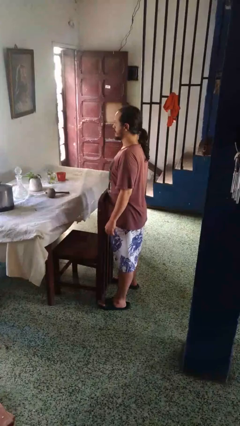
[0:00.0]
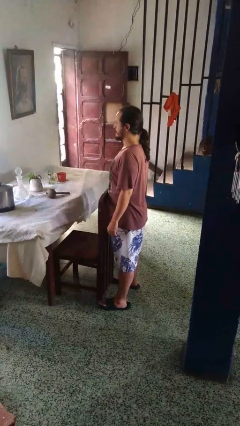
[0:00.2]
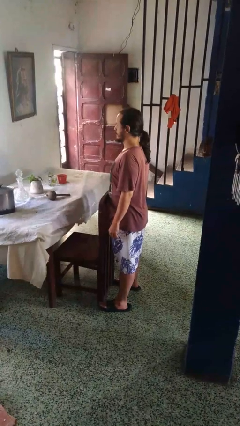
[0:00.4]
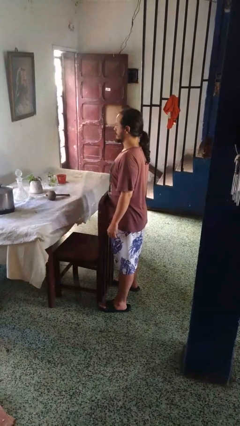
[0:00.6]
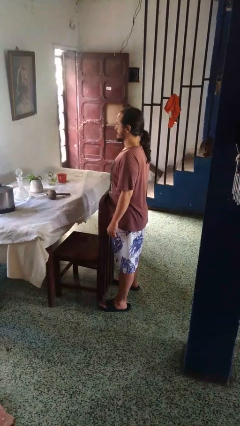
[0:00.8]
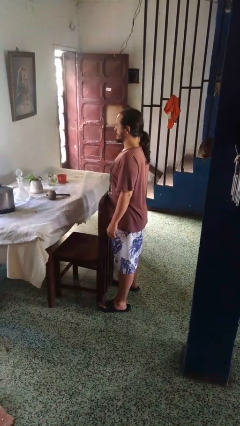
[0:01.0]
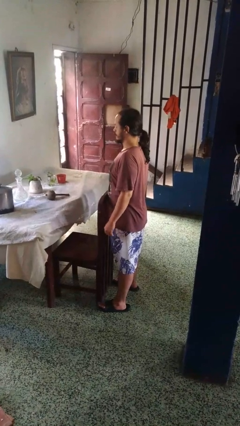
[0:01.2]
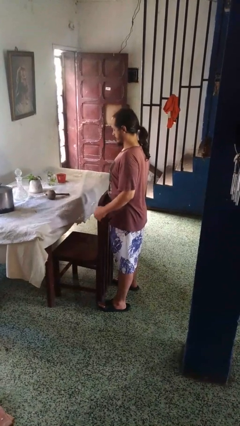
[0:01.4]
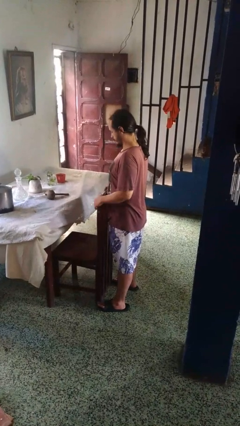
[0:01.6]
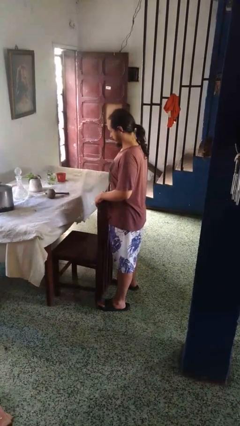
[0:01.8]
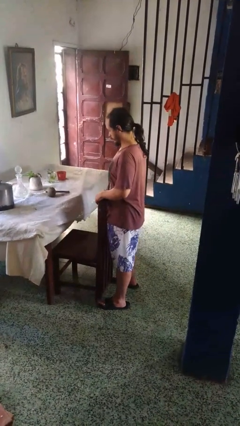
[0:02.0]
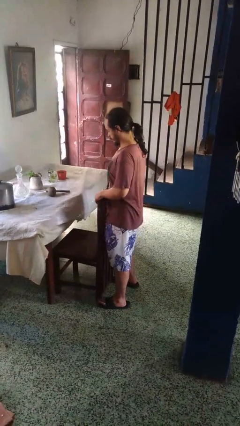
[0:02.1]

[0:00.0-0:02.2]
person pushes in chair

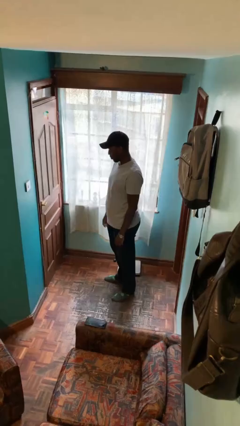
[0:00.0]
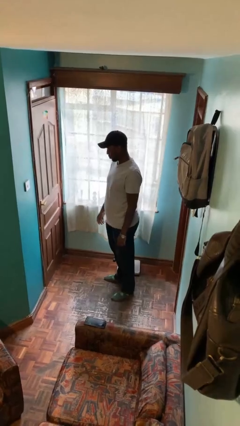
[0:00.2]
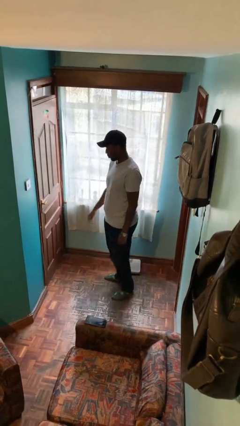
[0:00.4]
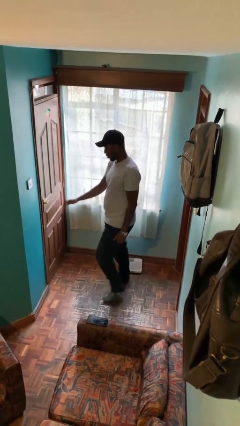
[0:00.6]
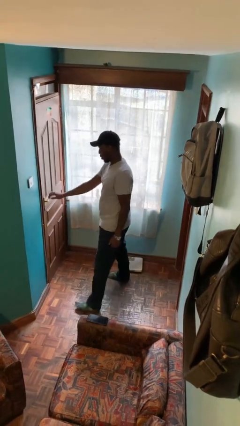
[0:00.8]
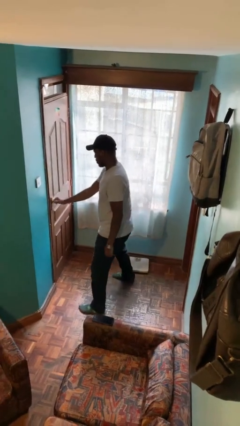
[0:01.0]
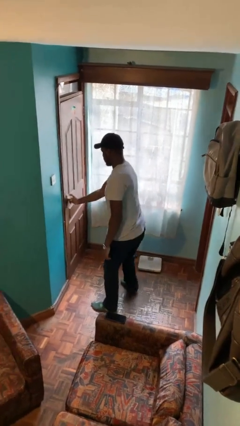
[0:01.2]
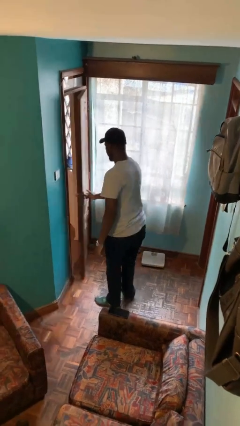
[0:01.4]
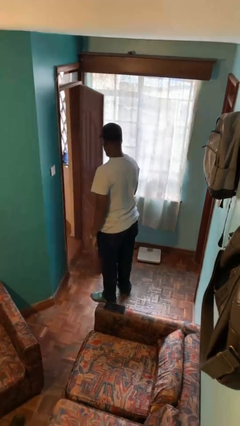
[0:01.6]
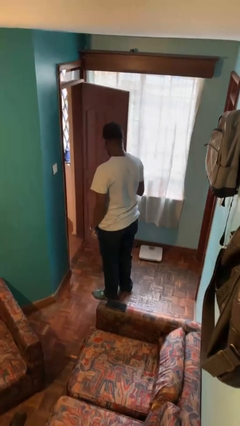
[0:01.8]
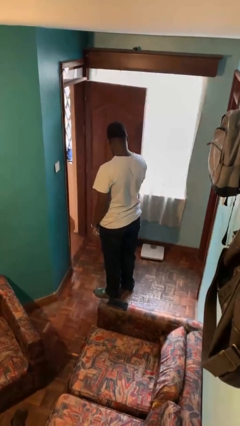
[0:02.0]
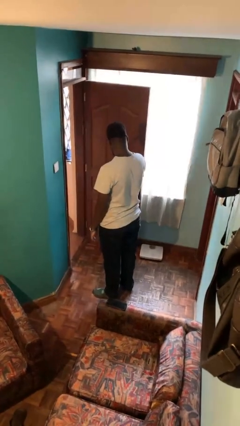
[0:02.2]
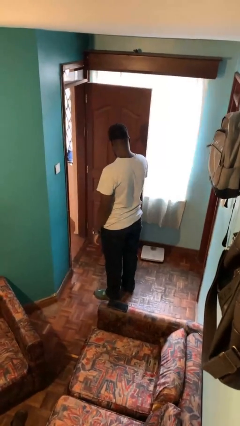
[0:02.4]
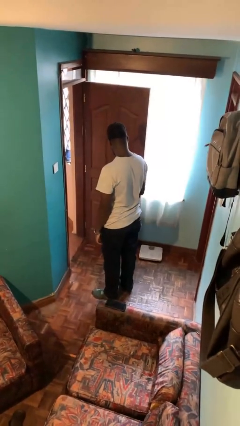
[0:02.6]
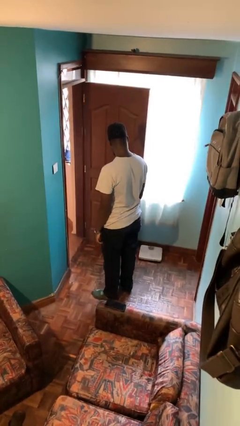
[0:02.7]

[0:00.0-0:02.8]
person opens facility door

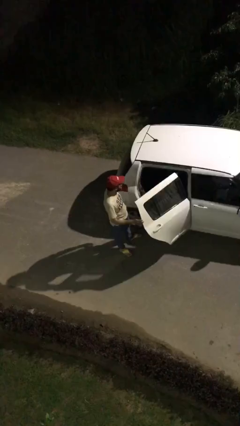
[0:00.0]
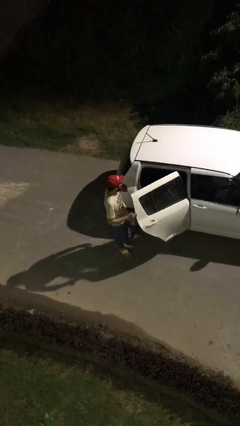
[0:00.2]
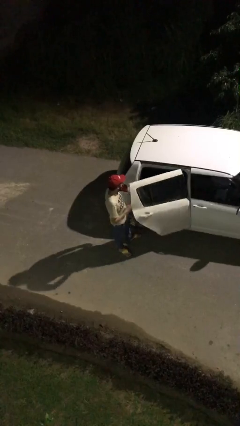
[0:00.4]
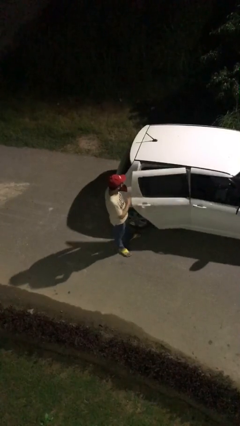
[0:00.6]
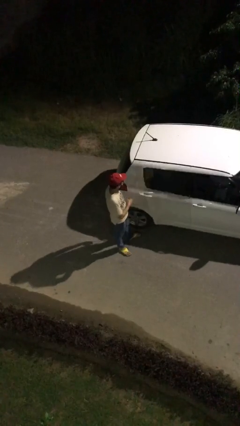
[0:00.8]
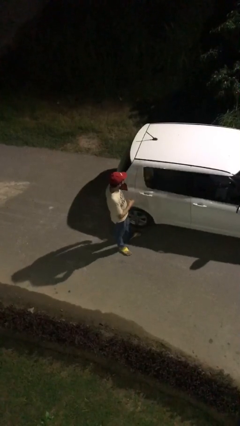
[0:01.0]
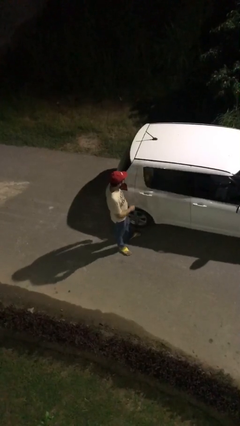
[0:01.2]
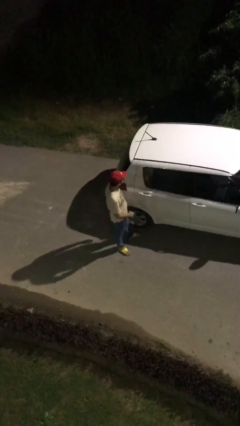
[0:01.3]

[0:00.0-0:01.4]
person closes car door

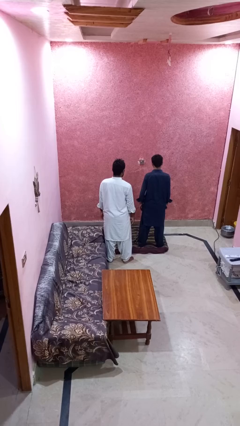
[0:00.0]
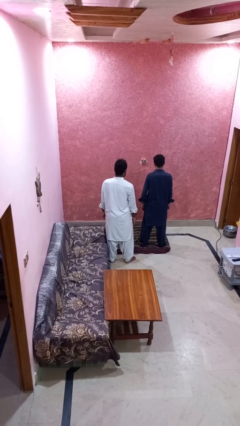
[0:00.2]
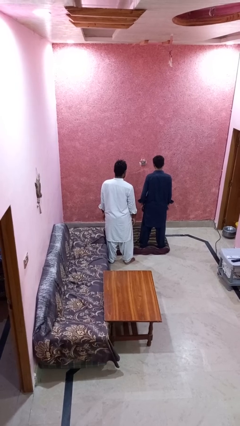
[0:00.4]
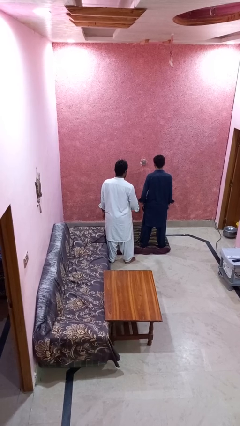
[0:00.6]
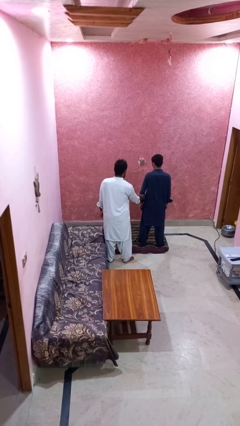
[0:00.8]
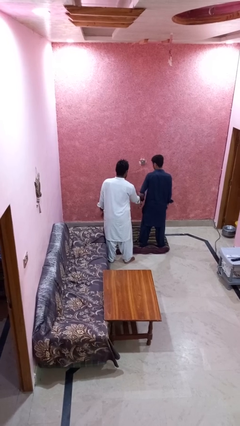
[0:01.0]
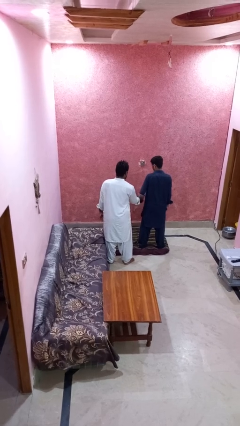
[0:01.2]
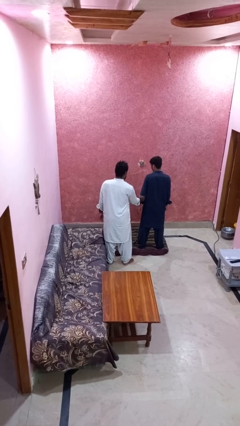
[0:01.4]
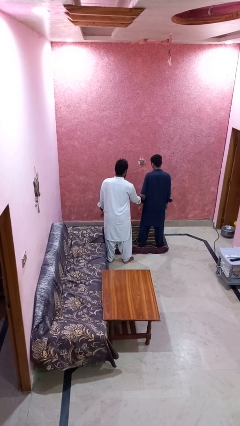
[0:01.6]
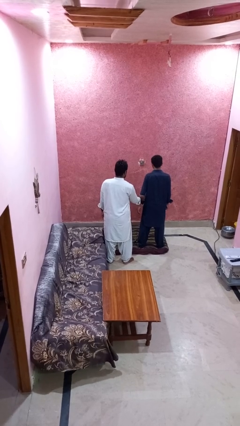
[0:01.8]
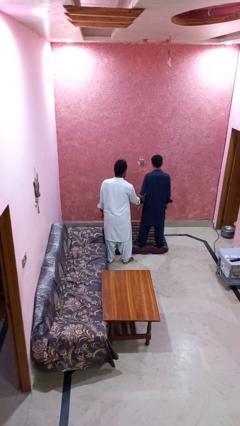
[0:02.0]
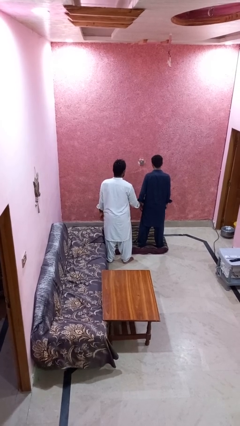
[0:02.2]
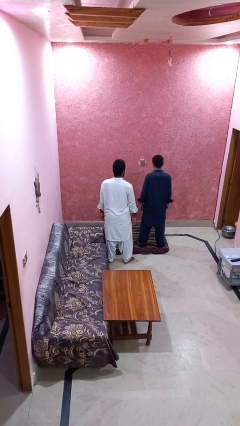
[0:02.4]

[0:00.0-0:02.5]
person grabs person by bicep

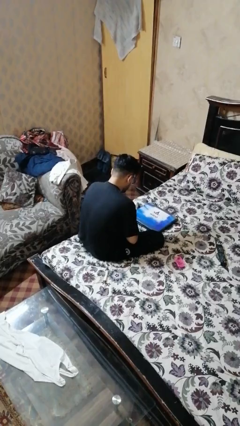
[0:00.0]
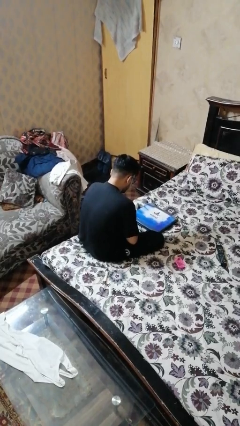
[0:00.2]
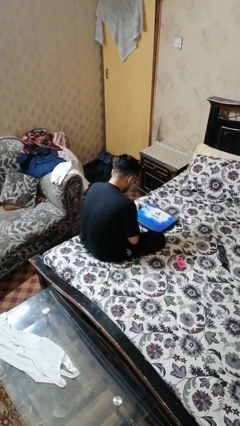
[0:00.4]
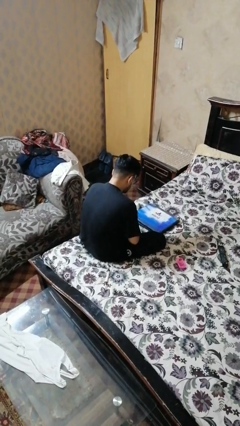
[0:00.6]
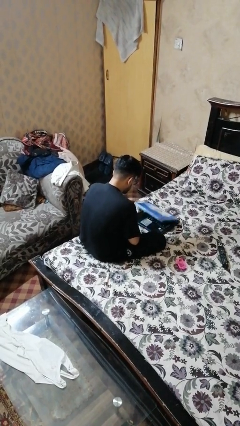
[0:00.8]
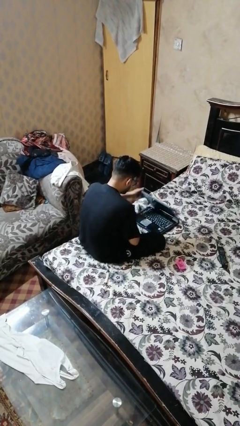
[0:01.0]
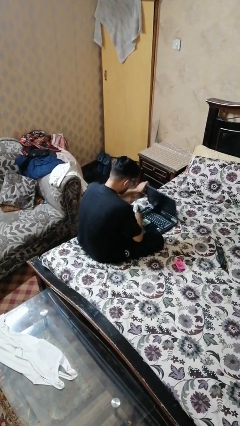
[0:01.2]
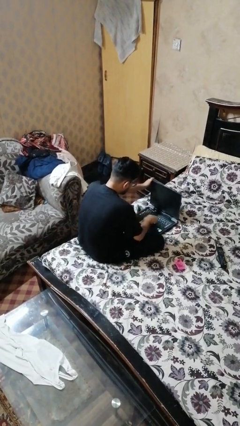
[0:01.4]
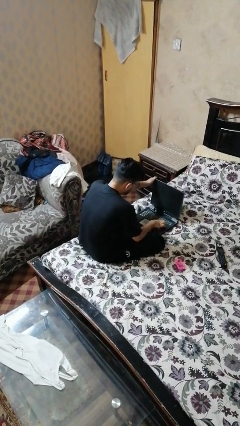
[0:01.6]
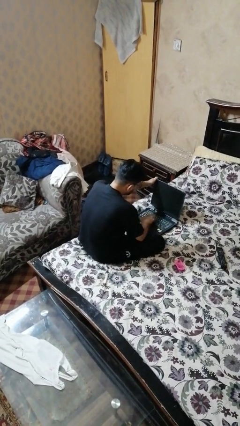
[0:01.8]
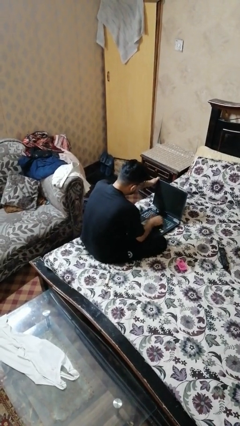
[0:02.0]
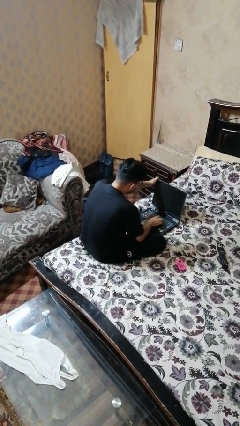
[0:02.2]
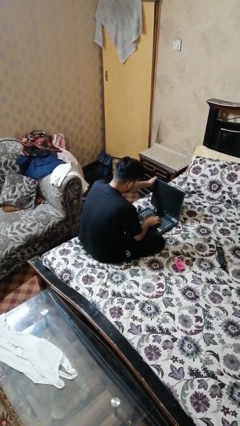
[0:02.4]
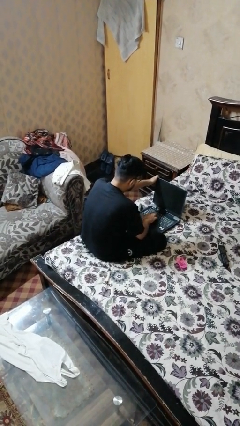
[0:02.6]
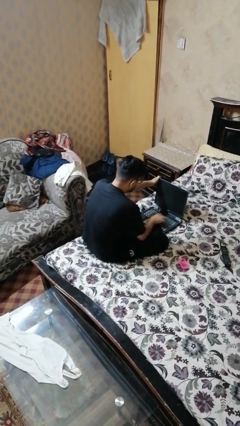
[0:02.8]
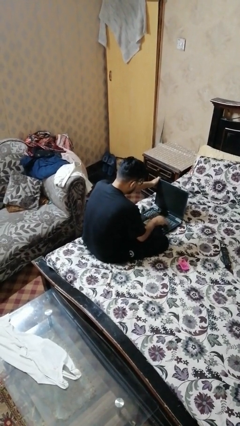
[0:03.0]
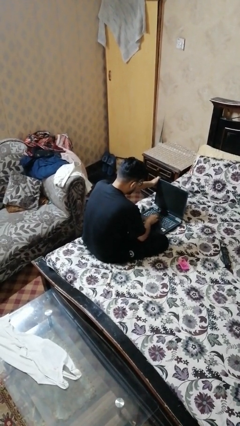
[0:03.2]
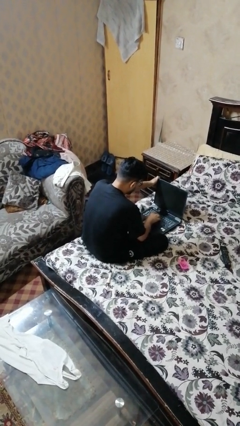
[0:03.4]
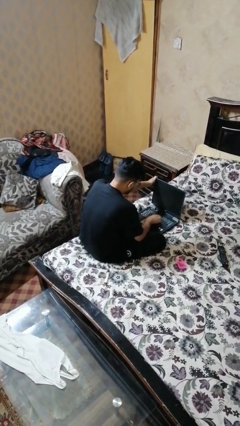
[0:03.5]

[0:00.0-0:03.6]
person opens laptop

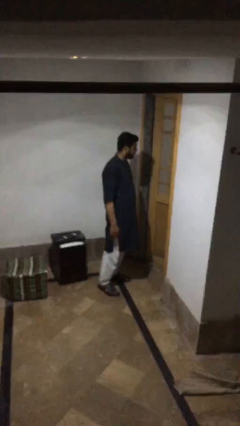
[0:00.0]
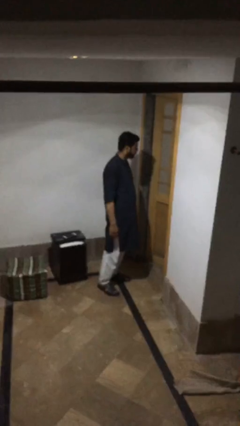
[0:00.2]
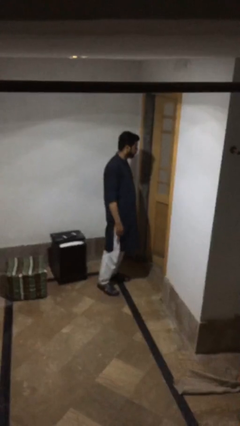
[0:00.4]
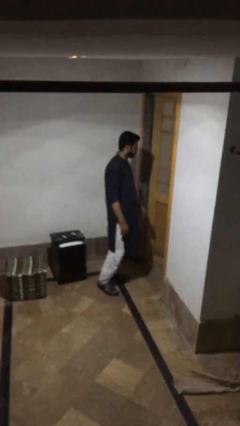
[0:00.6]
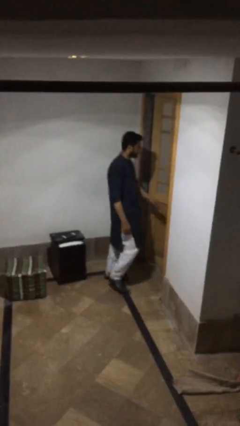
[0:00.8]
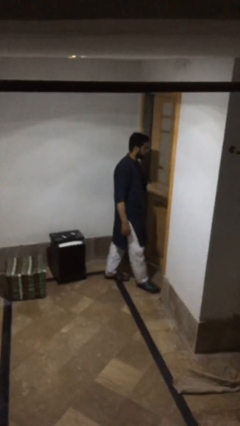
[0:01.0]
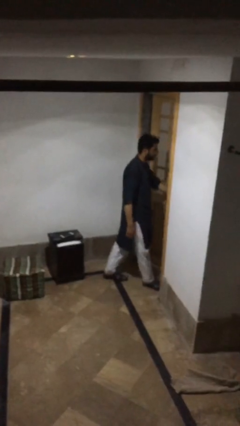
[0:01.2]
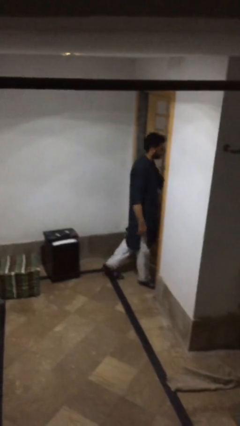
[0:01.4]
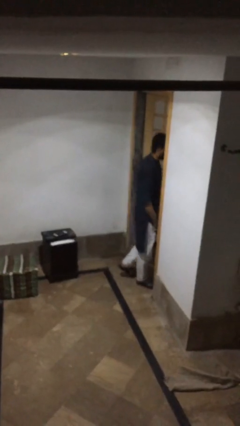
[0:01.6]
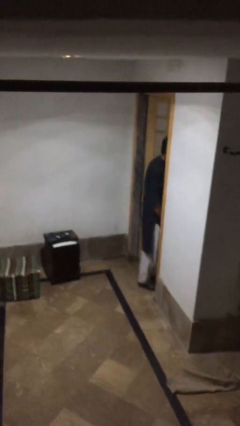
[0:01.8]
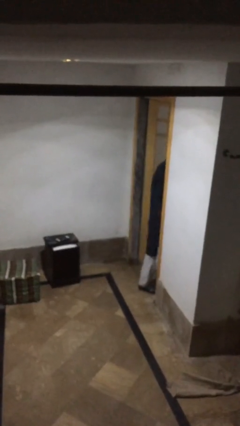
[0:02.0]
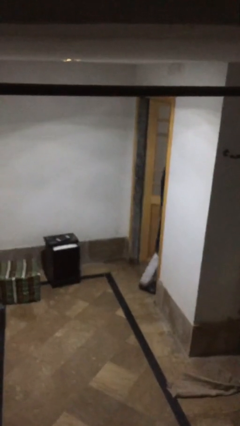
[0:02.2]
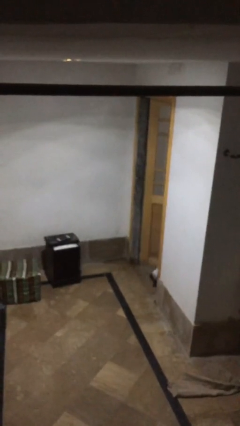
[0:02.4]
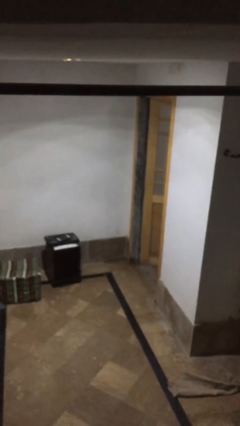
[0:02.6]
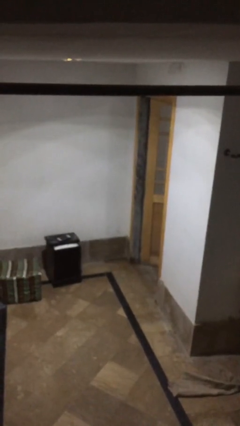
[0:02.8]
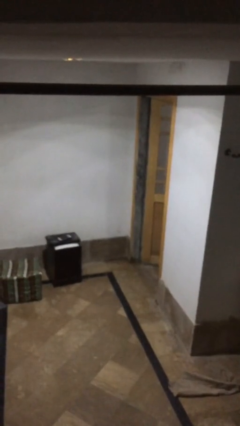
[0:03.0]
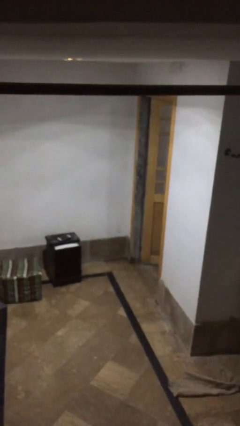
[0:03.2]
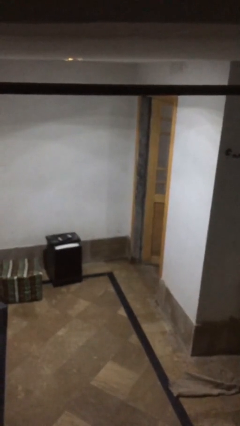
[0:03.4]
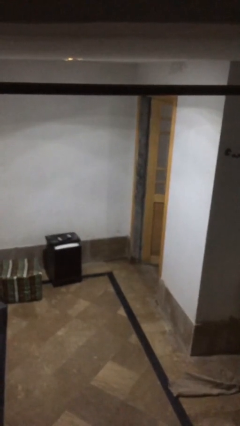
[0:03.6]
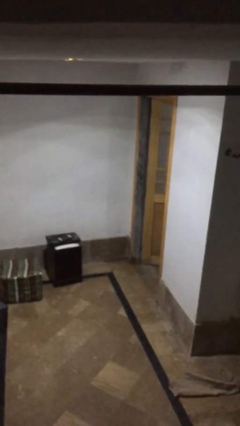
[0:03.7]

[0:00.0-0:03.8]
person exits scene through structure

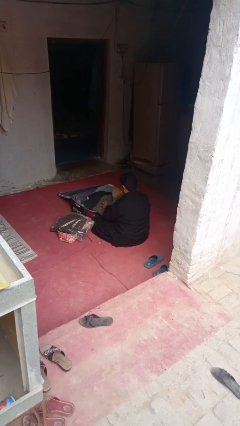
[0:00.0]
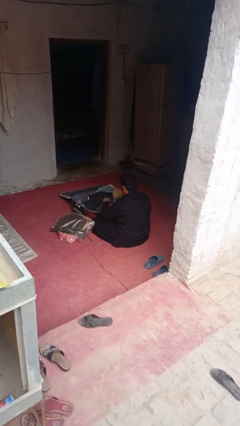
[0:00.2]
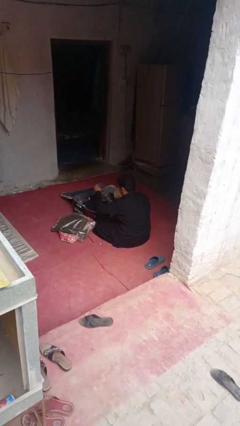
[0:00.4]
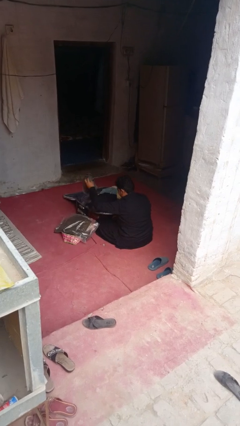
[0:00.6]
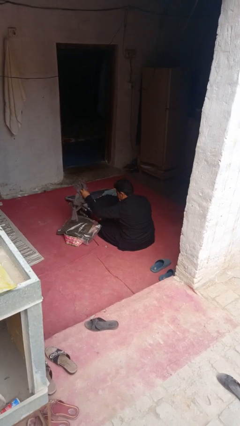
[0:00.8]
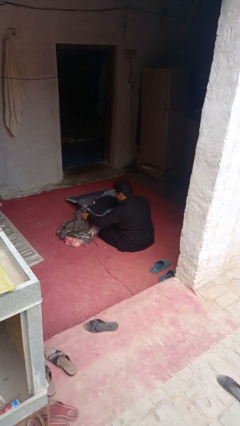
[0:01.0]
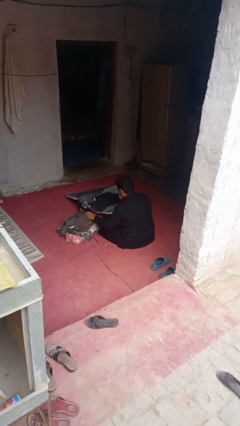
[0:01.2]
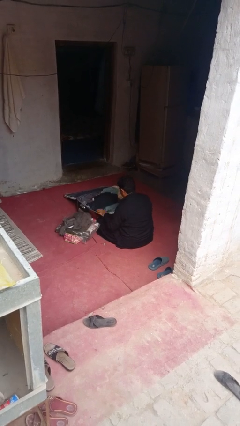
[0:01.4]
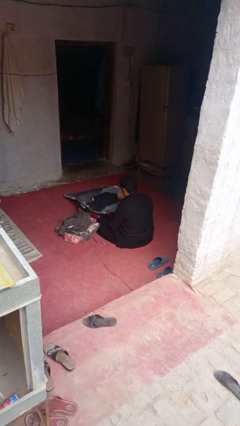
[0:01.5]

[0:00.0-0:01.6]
person unloads clothes from suitcase
